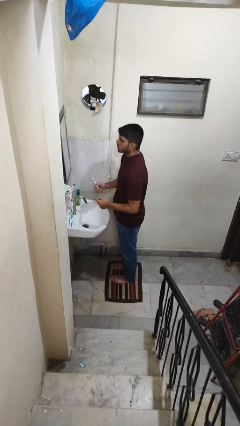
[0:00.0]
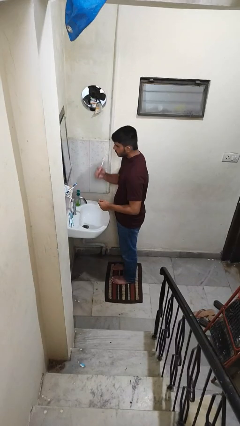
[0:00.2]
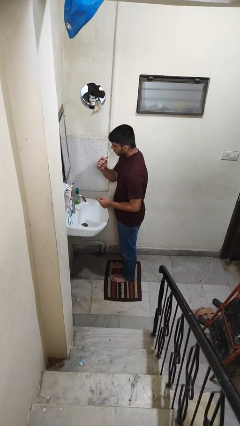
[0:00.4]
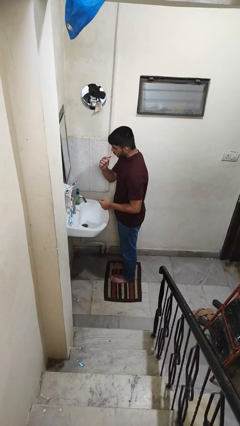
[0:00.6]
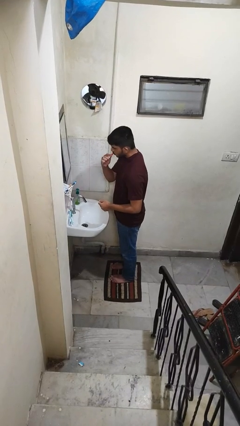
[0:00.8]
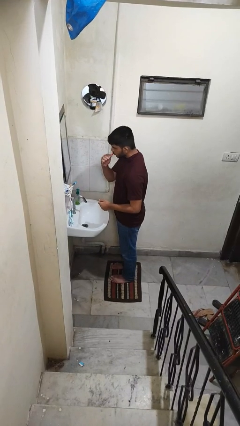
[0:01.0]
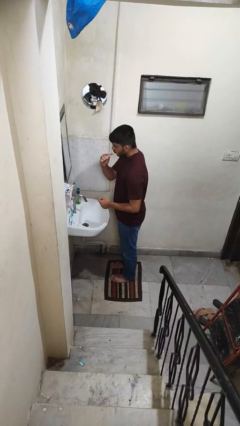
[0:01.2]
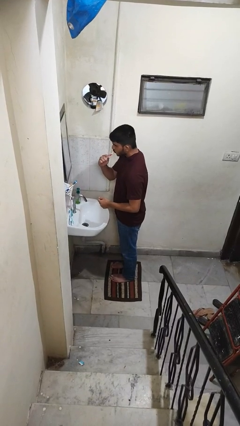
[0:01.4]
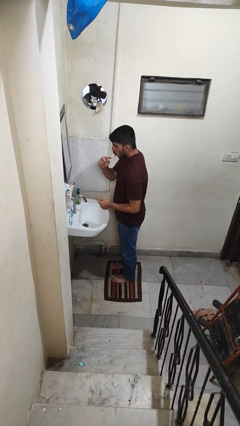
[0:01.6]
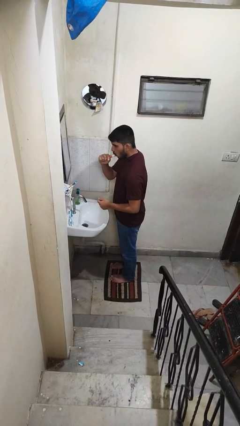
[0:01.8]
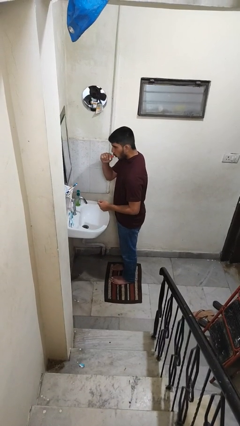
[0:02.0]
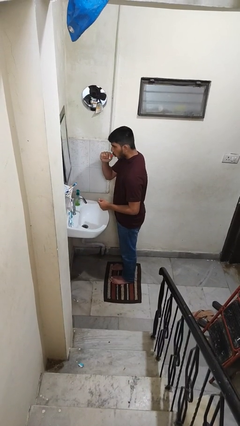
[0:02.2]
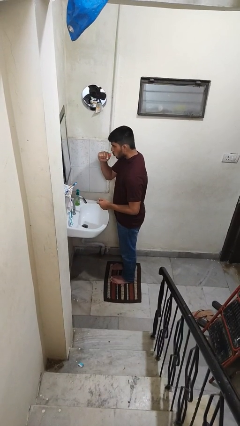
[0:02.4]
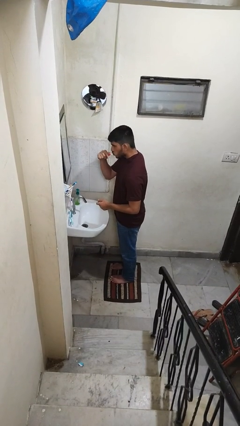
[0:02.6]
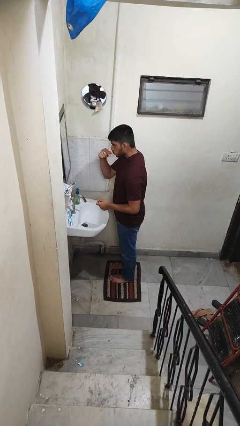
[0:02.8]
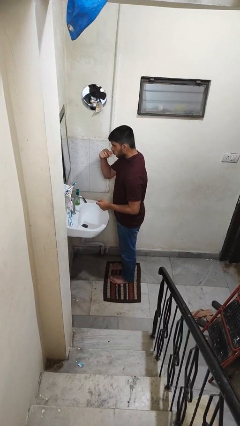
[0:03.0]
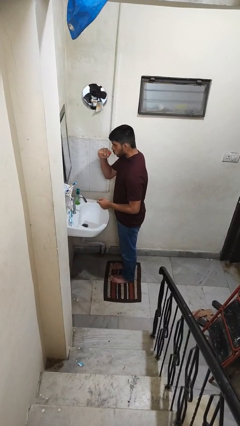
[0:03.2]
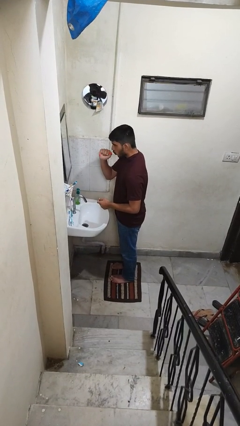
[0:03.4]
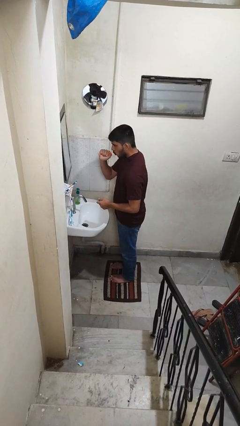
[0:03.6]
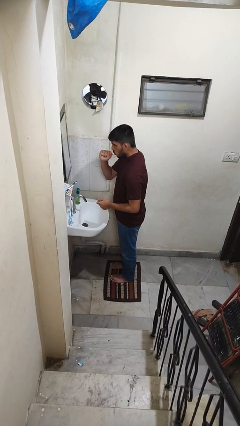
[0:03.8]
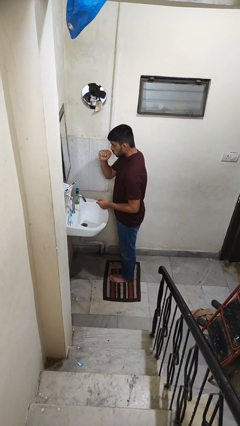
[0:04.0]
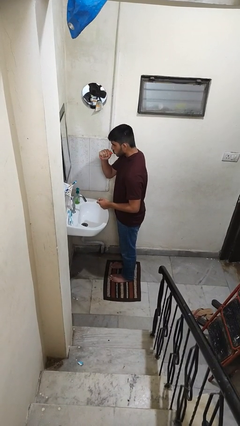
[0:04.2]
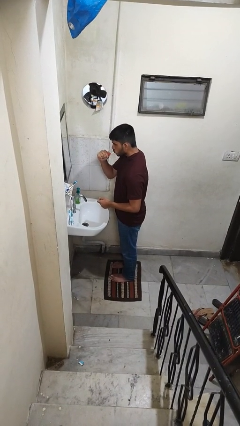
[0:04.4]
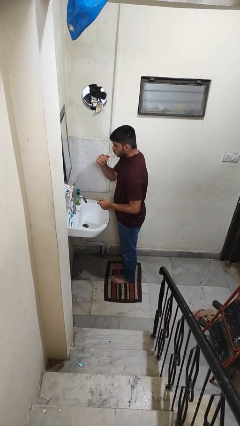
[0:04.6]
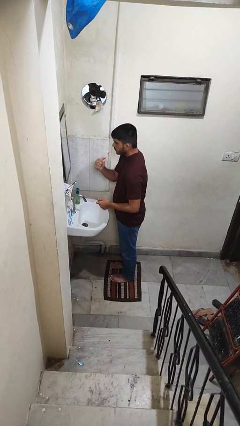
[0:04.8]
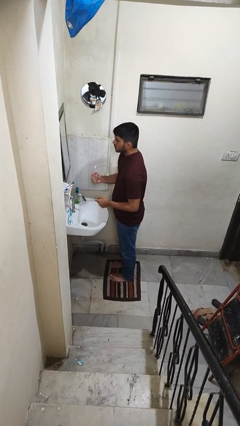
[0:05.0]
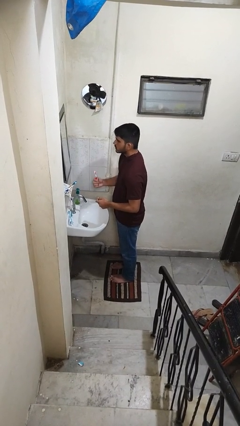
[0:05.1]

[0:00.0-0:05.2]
person brushes teeth

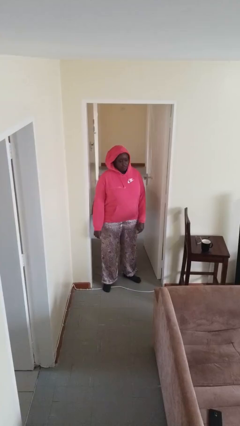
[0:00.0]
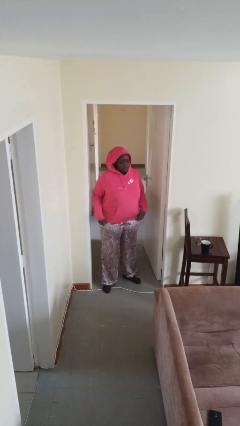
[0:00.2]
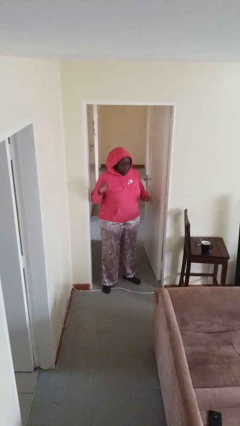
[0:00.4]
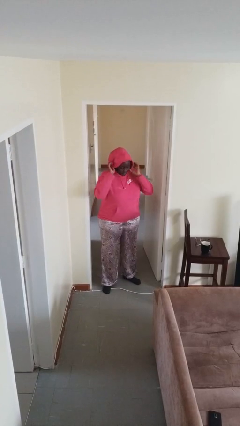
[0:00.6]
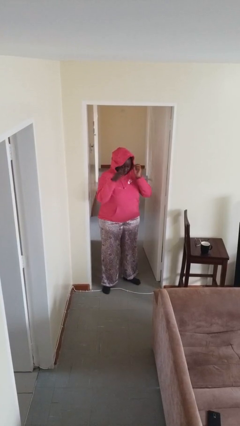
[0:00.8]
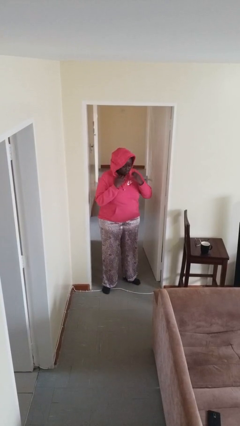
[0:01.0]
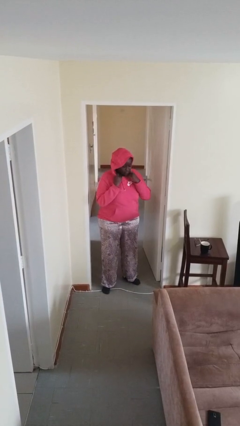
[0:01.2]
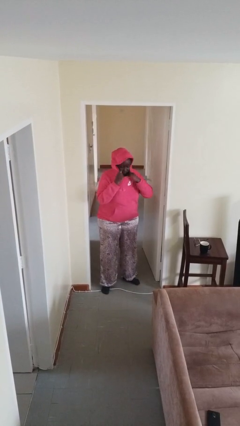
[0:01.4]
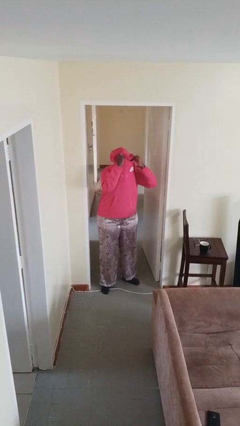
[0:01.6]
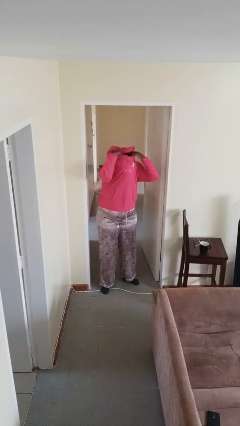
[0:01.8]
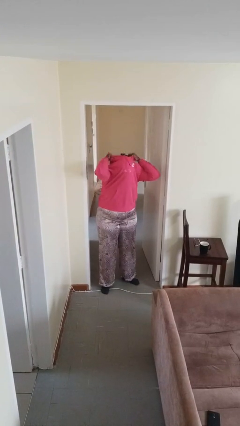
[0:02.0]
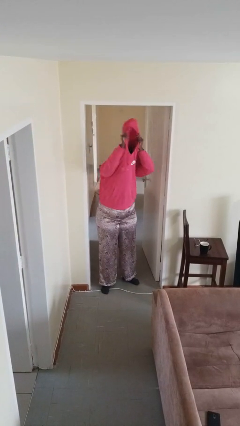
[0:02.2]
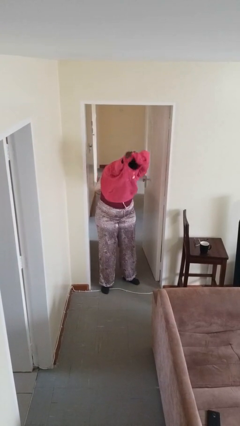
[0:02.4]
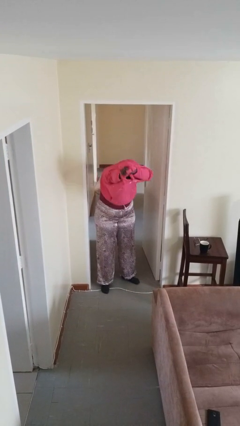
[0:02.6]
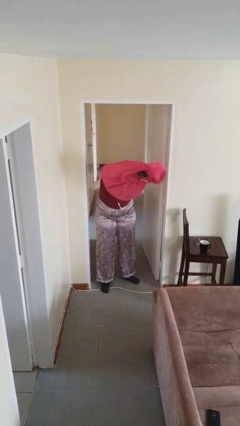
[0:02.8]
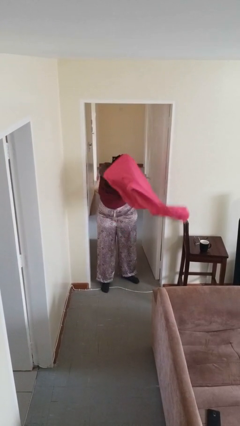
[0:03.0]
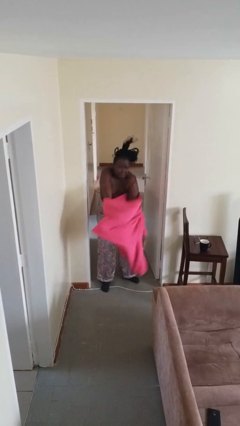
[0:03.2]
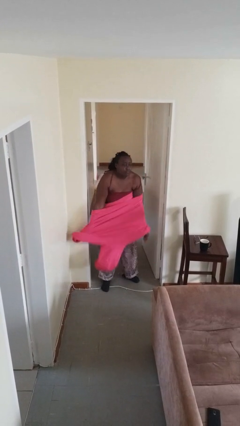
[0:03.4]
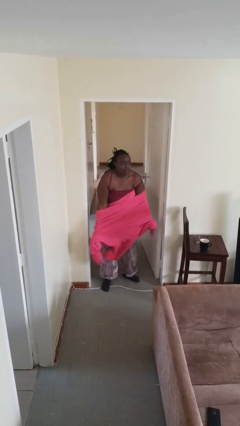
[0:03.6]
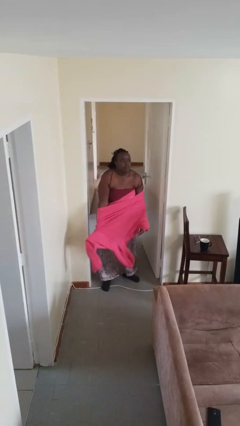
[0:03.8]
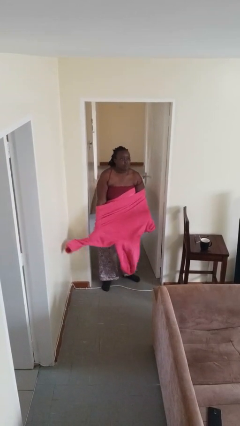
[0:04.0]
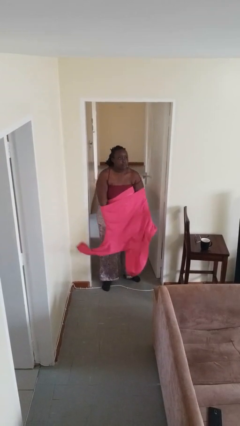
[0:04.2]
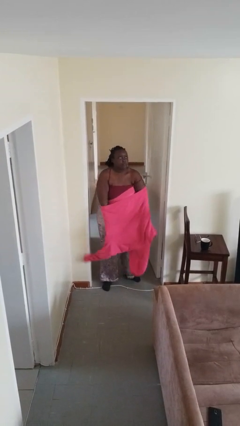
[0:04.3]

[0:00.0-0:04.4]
person takes off hoodie

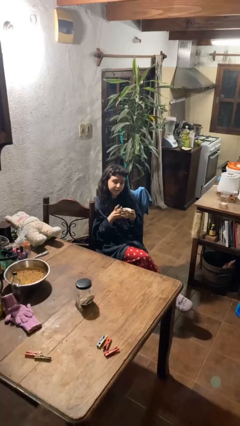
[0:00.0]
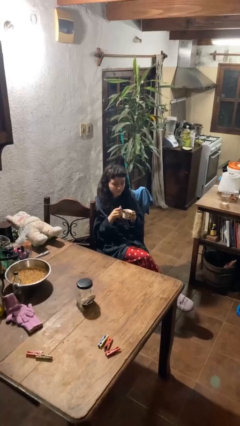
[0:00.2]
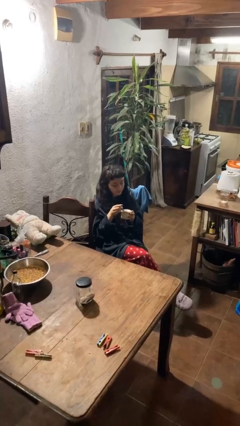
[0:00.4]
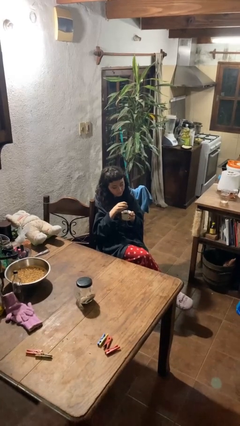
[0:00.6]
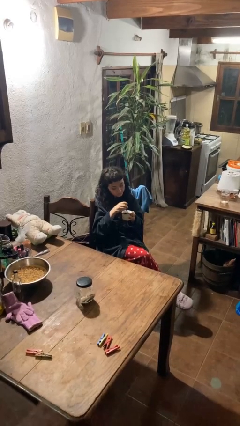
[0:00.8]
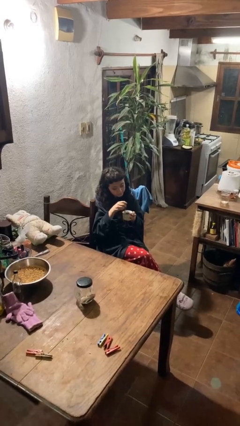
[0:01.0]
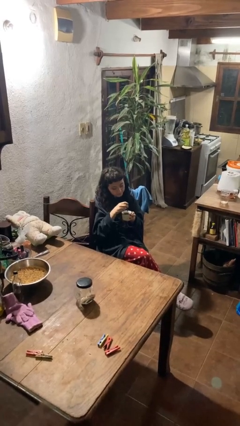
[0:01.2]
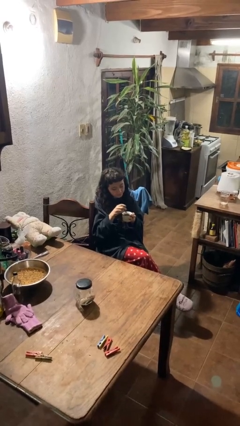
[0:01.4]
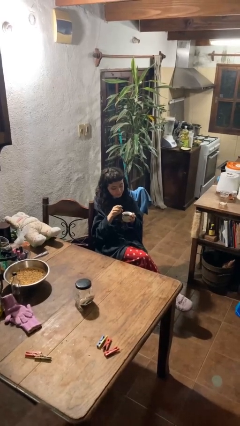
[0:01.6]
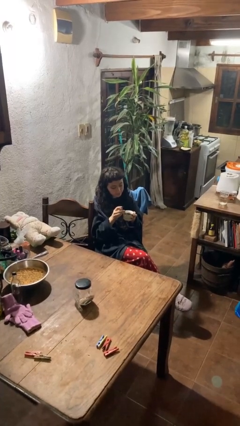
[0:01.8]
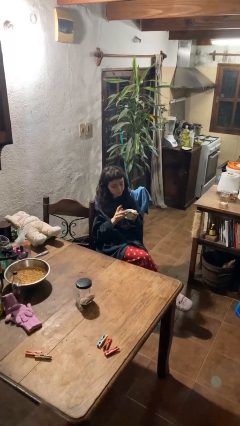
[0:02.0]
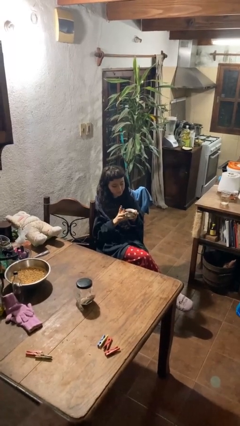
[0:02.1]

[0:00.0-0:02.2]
person stirs mug

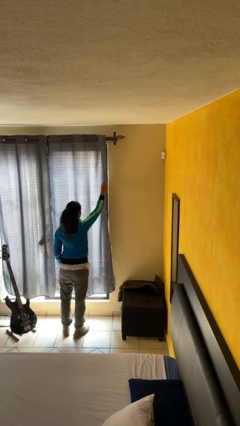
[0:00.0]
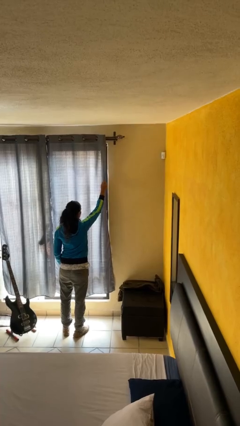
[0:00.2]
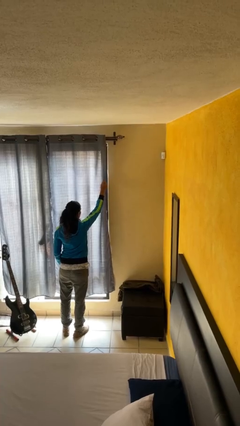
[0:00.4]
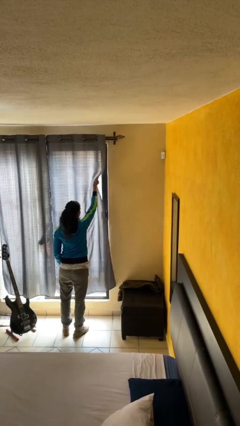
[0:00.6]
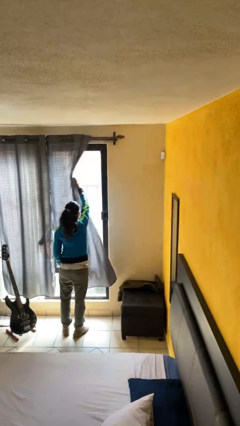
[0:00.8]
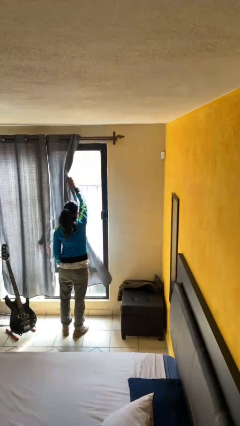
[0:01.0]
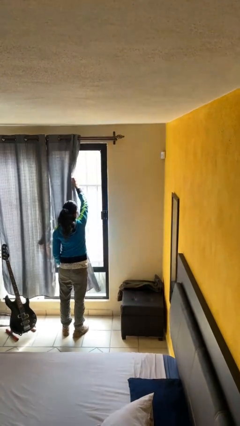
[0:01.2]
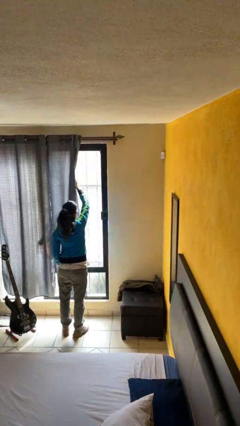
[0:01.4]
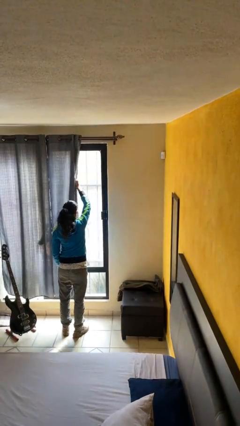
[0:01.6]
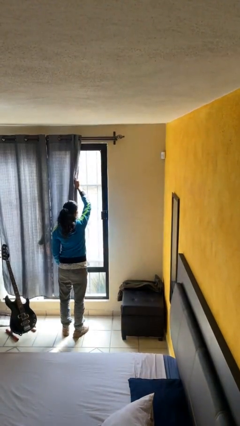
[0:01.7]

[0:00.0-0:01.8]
person opens curtains

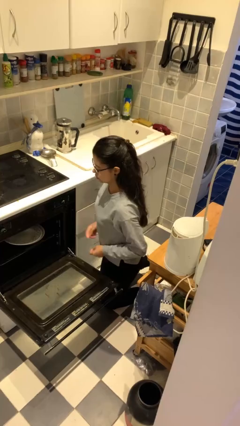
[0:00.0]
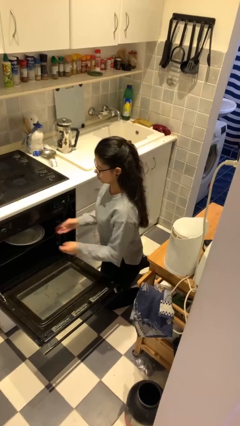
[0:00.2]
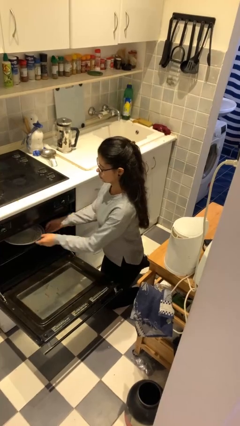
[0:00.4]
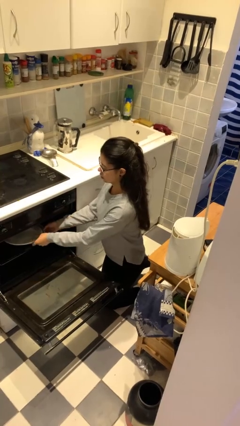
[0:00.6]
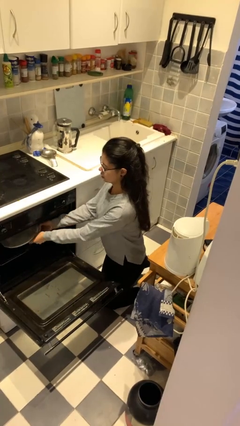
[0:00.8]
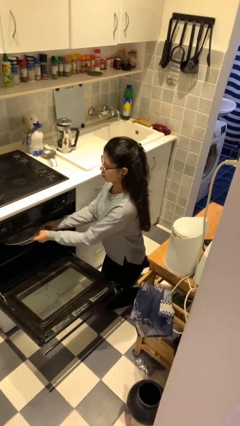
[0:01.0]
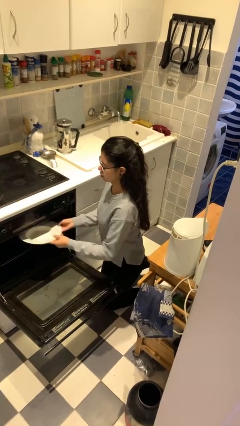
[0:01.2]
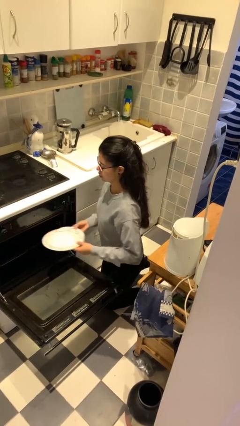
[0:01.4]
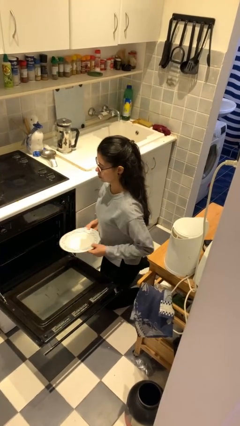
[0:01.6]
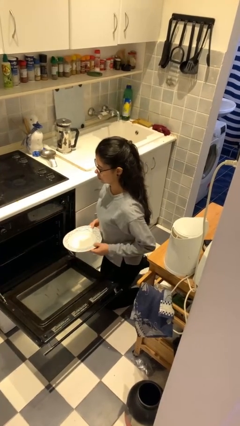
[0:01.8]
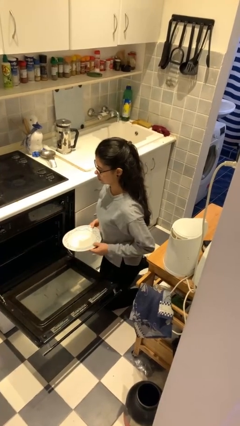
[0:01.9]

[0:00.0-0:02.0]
person unloads dishwasher

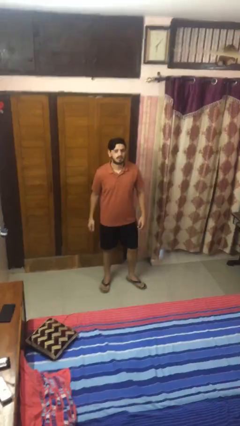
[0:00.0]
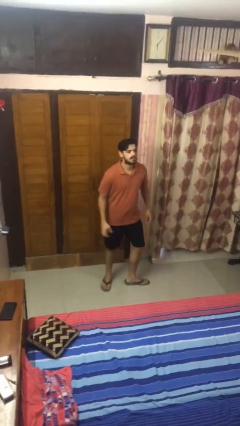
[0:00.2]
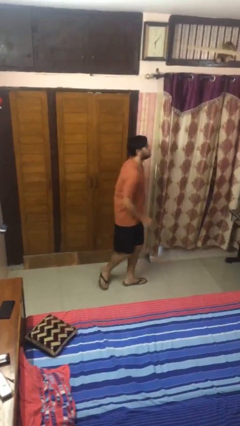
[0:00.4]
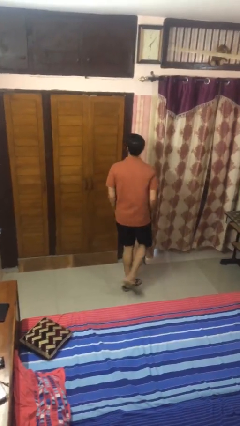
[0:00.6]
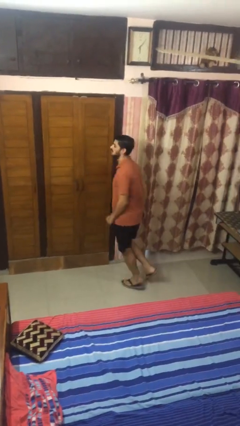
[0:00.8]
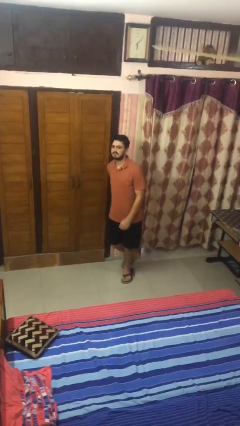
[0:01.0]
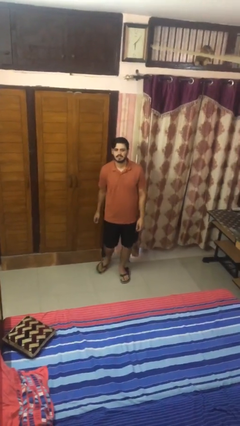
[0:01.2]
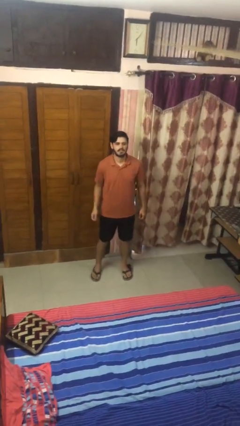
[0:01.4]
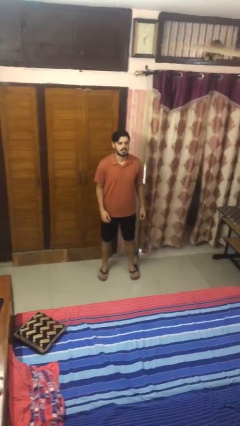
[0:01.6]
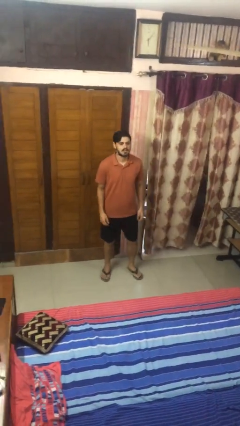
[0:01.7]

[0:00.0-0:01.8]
person twirls
